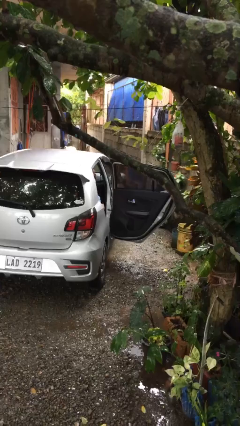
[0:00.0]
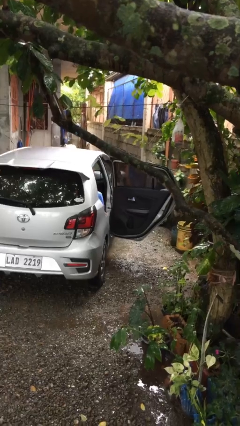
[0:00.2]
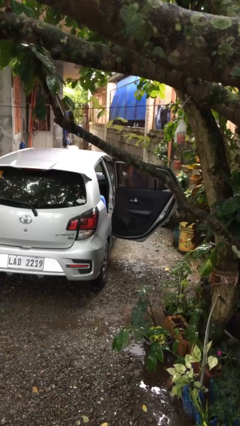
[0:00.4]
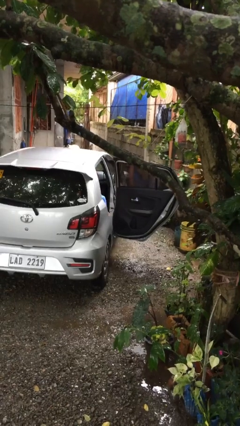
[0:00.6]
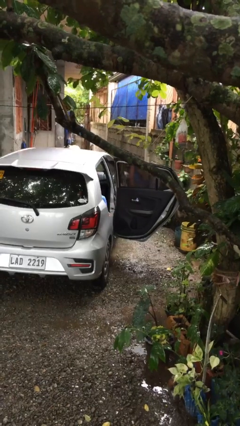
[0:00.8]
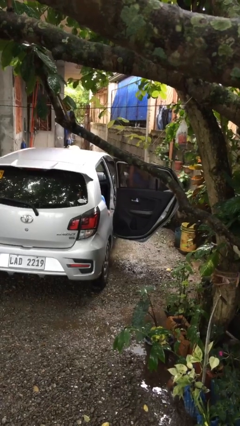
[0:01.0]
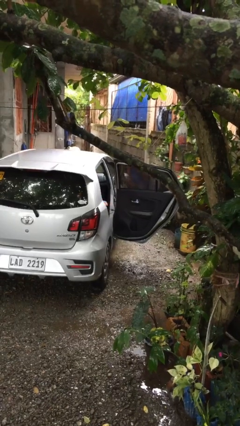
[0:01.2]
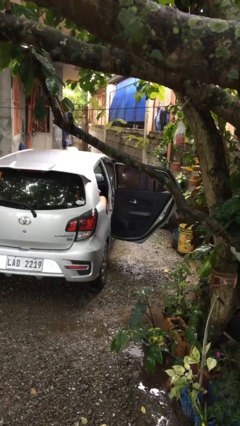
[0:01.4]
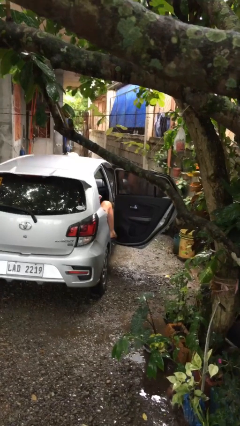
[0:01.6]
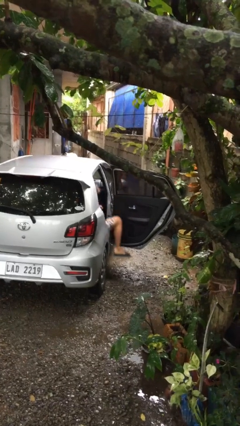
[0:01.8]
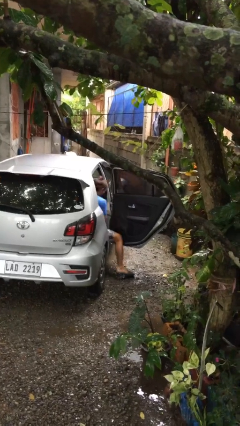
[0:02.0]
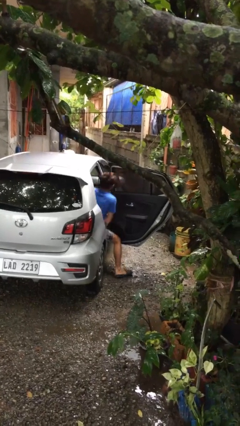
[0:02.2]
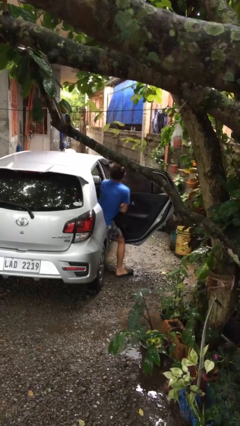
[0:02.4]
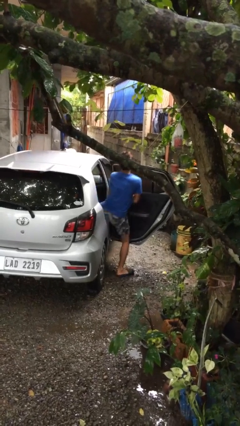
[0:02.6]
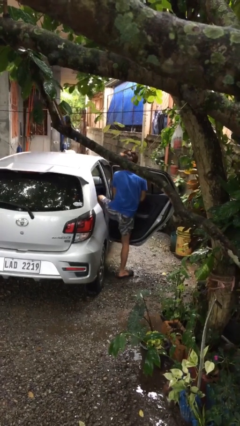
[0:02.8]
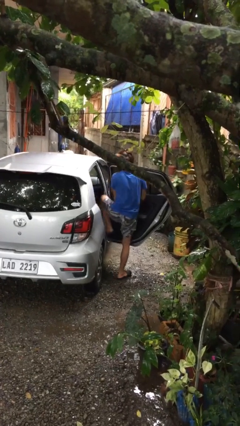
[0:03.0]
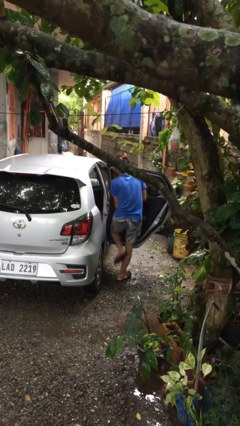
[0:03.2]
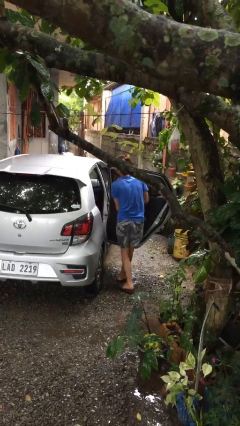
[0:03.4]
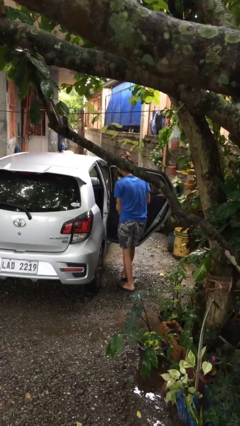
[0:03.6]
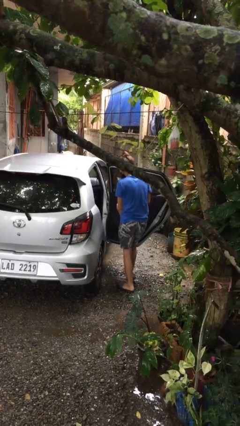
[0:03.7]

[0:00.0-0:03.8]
person exits car

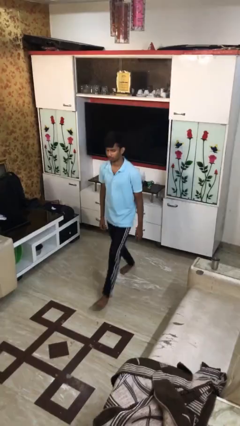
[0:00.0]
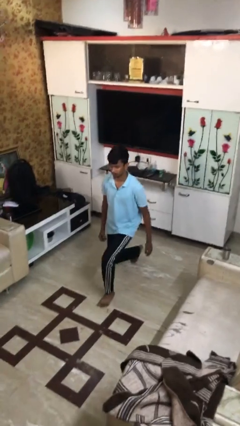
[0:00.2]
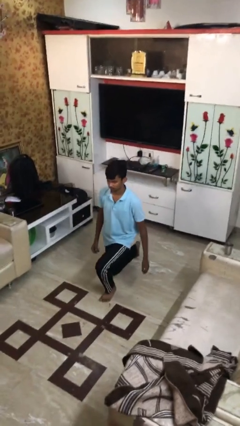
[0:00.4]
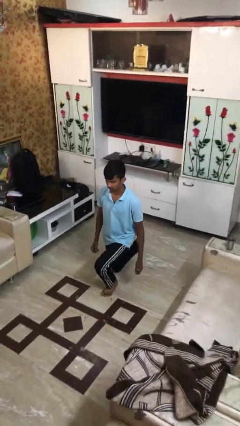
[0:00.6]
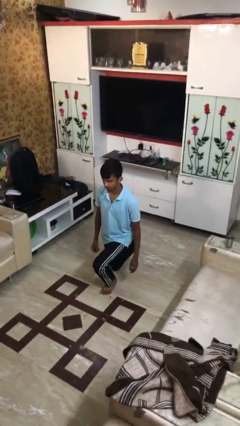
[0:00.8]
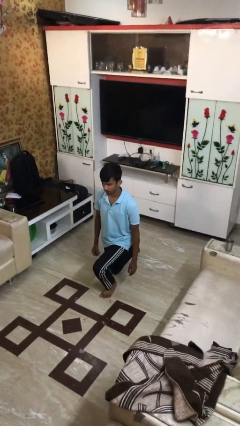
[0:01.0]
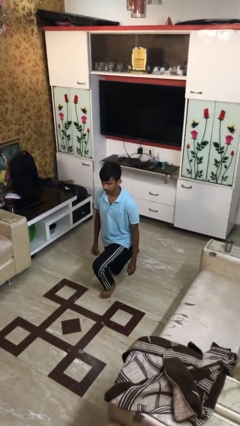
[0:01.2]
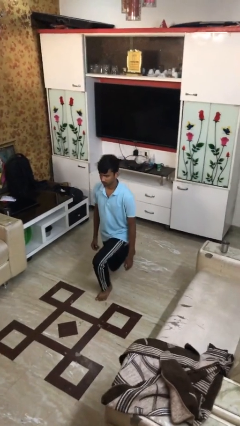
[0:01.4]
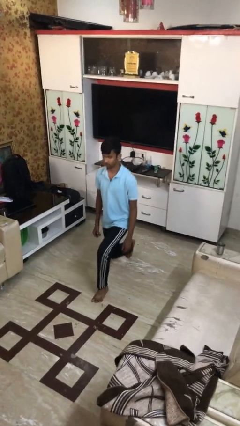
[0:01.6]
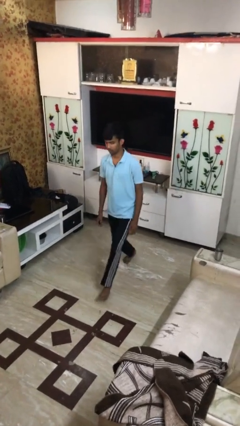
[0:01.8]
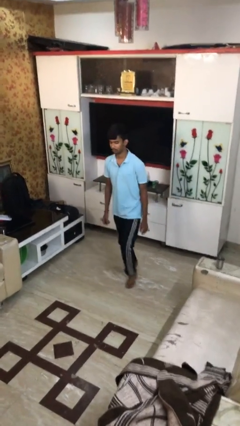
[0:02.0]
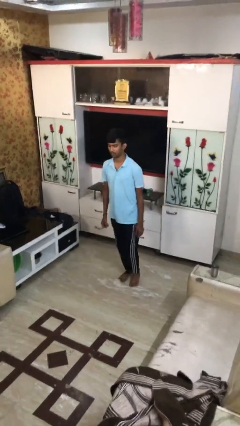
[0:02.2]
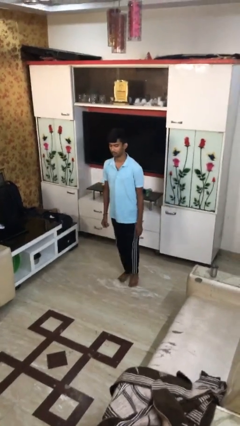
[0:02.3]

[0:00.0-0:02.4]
person exercises with lunges

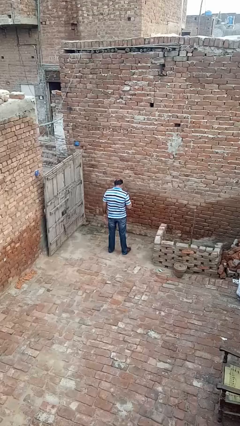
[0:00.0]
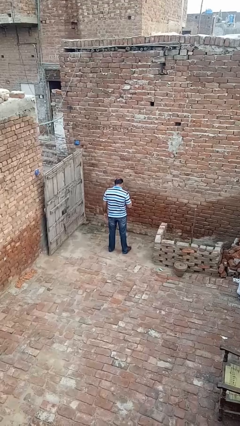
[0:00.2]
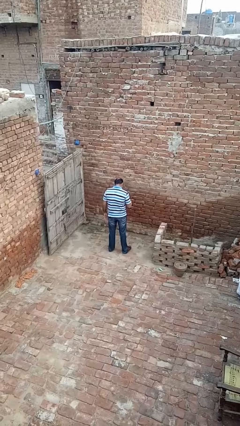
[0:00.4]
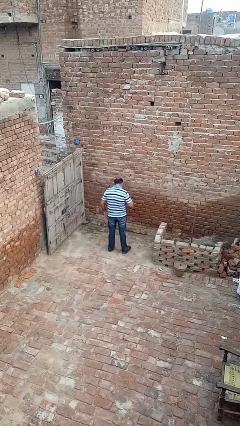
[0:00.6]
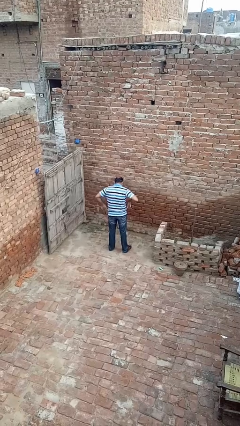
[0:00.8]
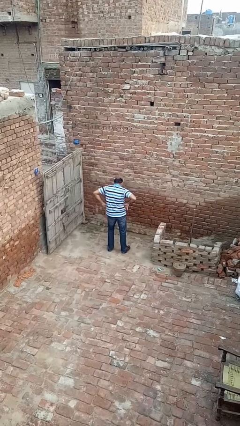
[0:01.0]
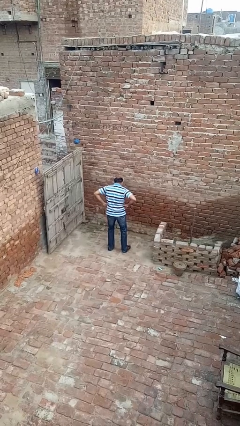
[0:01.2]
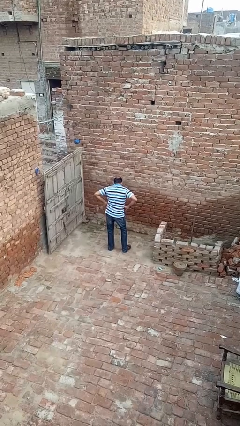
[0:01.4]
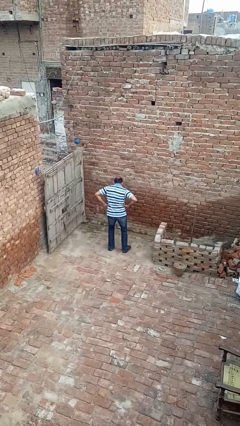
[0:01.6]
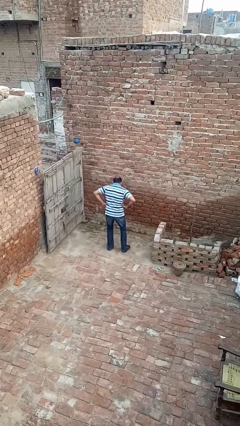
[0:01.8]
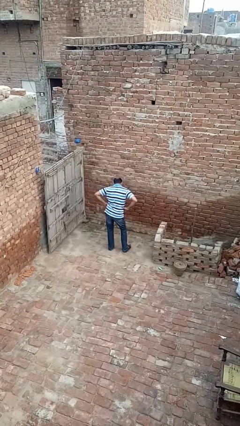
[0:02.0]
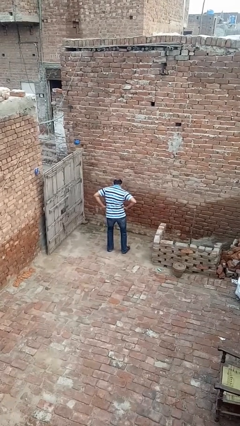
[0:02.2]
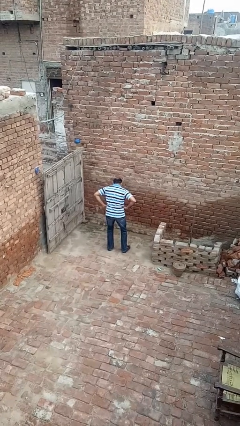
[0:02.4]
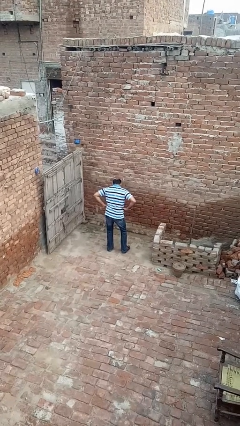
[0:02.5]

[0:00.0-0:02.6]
person wiggles hips

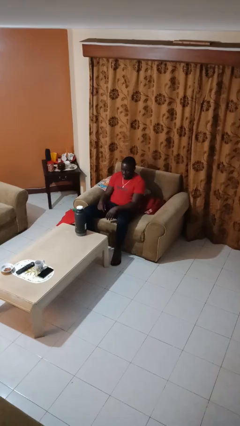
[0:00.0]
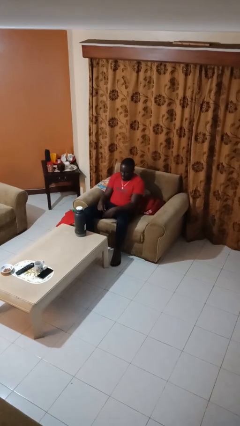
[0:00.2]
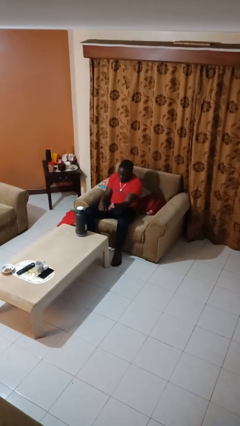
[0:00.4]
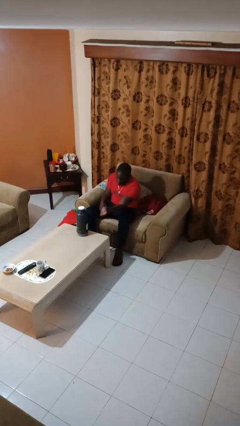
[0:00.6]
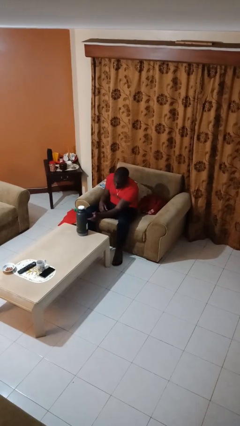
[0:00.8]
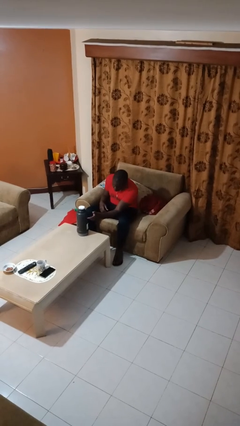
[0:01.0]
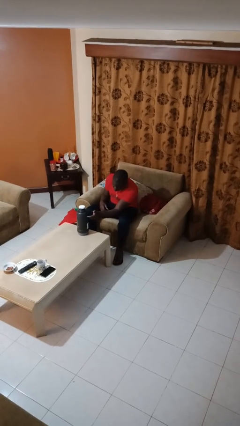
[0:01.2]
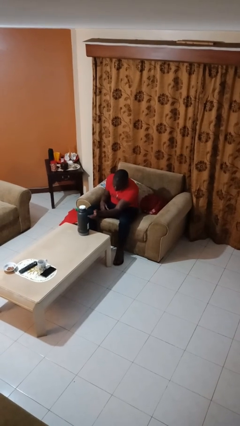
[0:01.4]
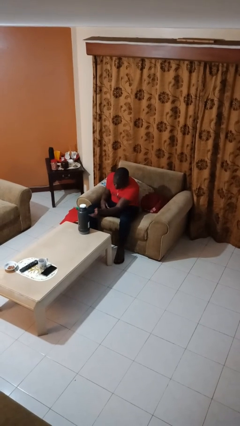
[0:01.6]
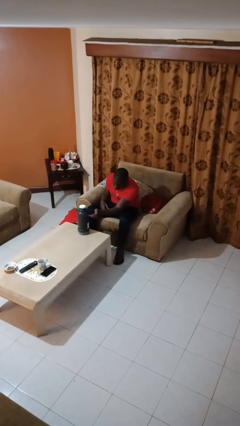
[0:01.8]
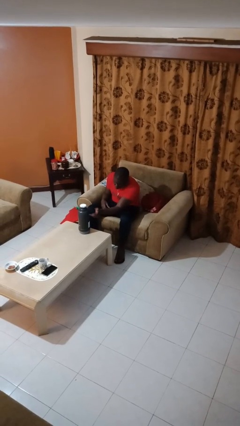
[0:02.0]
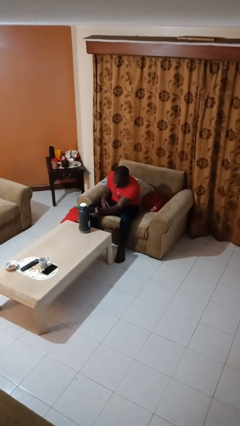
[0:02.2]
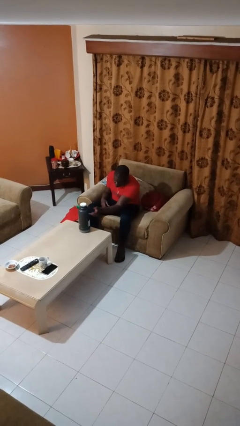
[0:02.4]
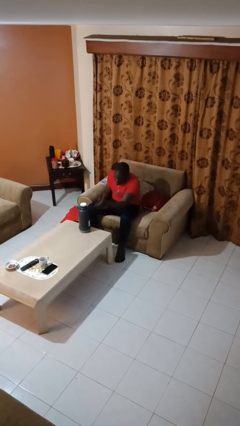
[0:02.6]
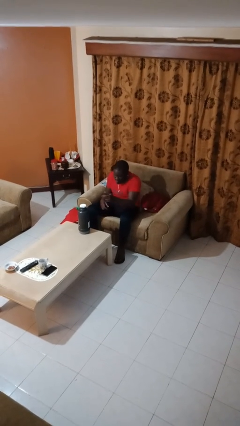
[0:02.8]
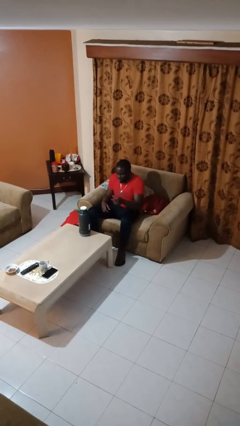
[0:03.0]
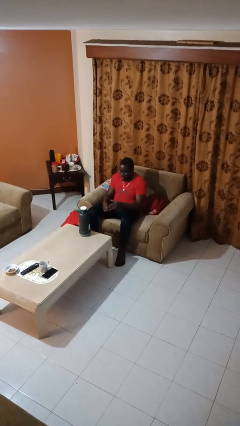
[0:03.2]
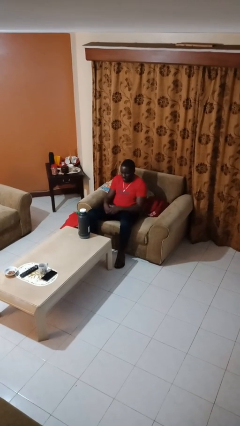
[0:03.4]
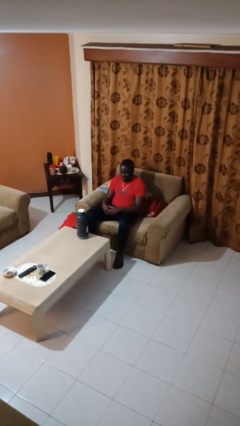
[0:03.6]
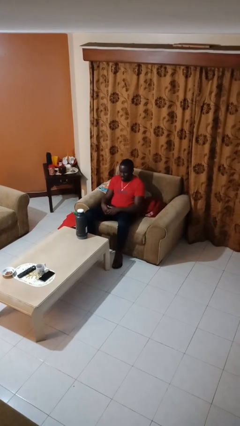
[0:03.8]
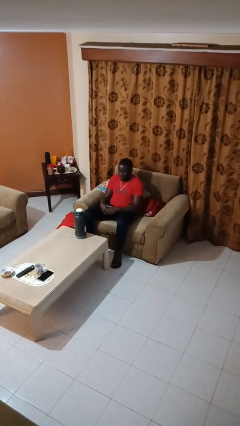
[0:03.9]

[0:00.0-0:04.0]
person taps object with finger

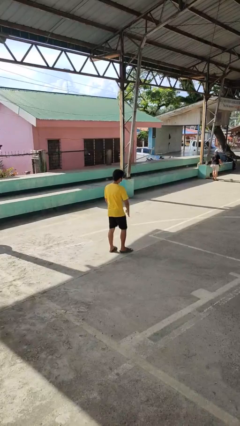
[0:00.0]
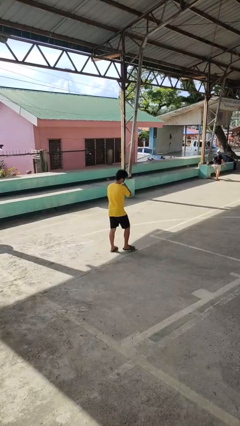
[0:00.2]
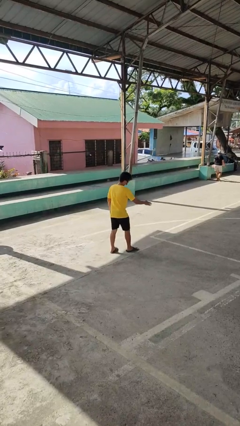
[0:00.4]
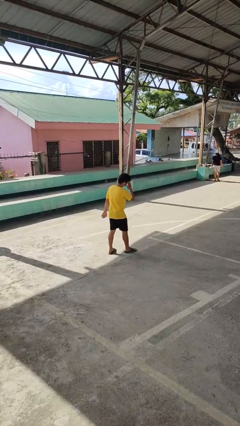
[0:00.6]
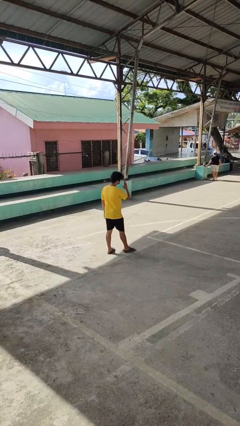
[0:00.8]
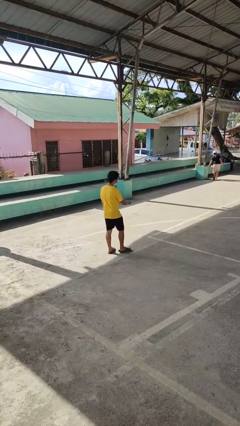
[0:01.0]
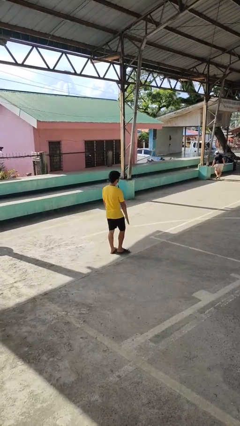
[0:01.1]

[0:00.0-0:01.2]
person karate chop

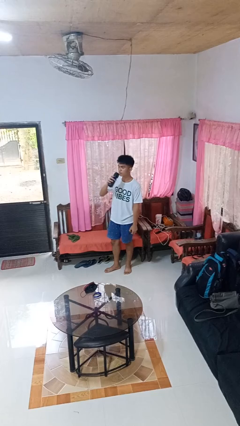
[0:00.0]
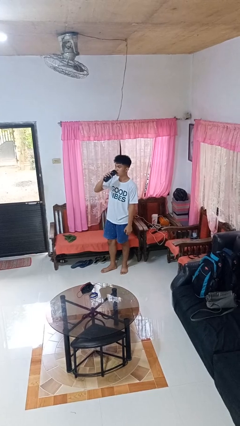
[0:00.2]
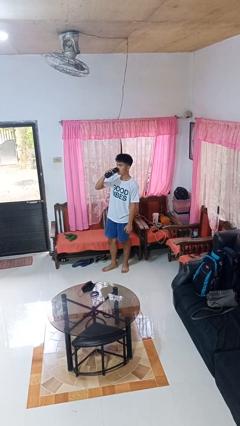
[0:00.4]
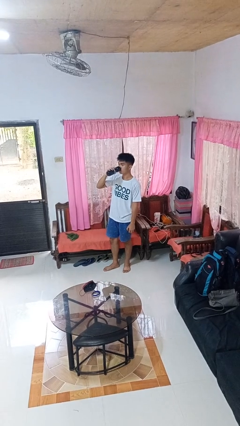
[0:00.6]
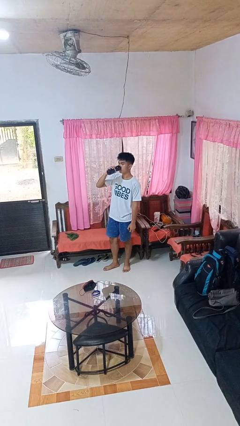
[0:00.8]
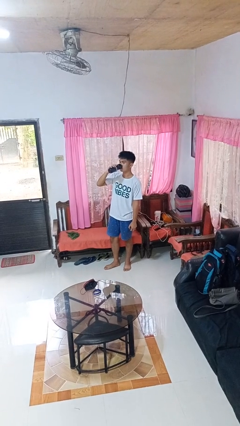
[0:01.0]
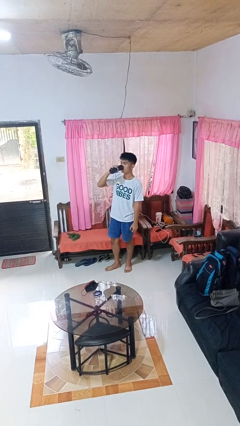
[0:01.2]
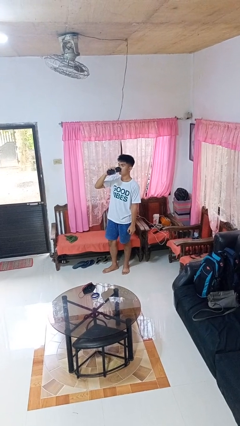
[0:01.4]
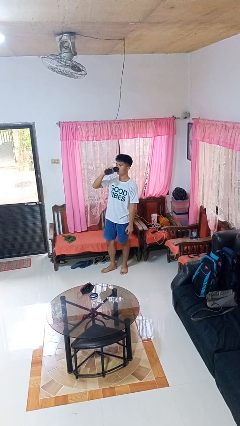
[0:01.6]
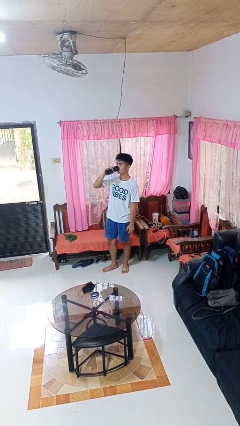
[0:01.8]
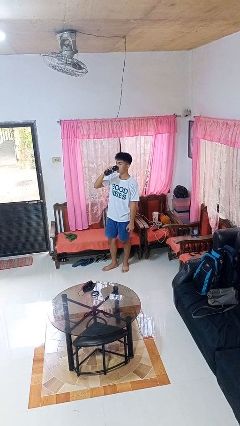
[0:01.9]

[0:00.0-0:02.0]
person drinks from bottle

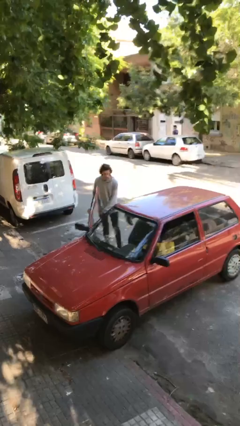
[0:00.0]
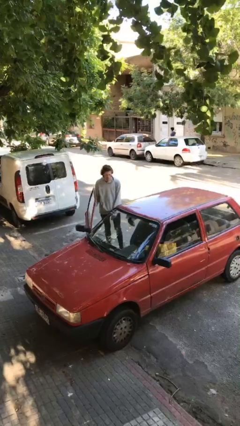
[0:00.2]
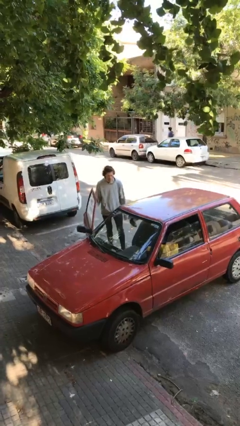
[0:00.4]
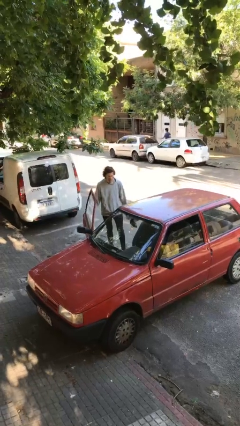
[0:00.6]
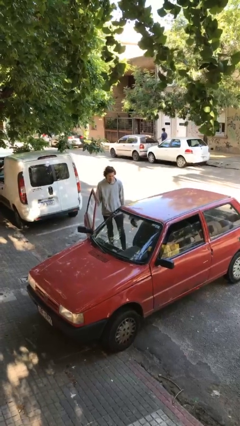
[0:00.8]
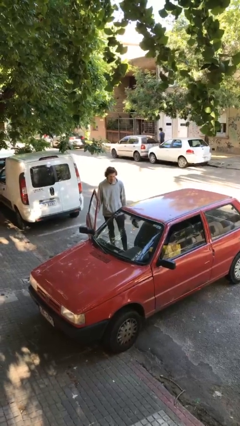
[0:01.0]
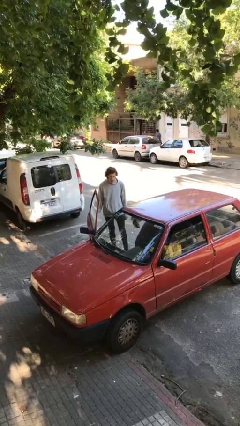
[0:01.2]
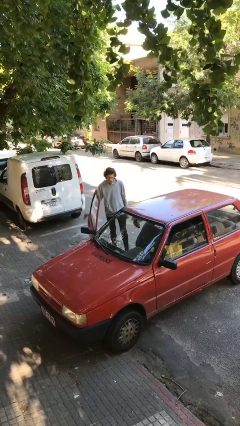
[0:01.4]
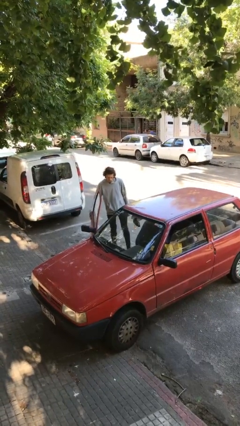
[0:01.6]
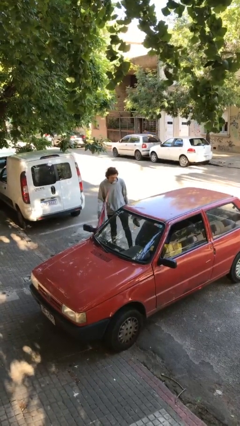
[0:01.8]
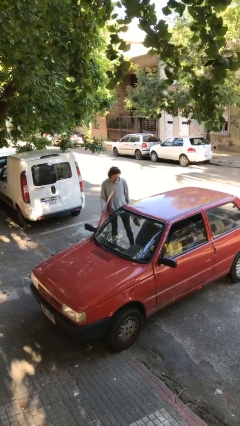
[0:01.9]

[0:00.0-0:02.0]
person opens car door
